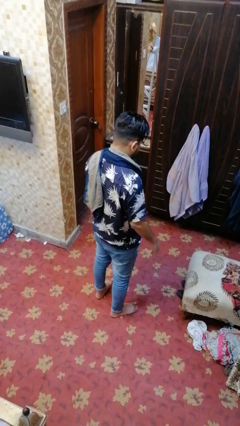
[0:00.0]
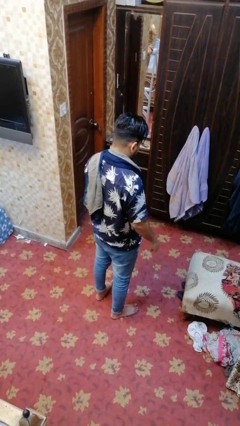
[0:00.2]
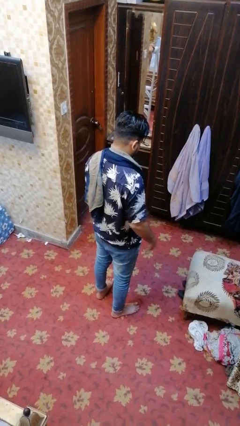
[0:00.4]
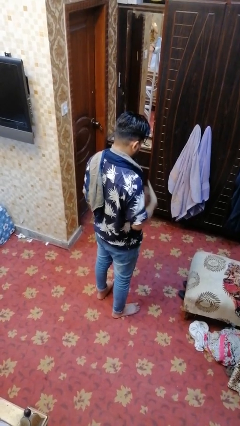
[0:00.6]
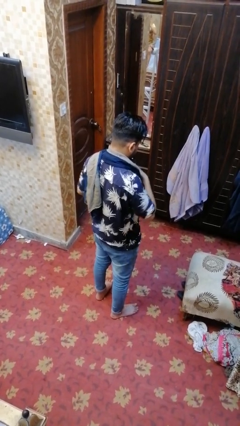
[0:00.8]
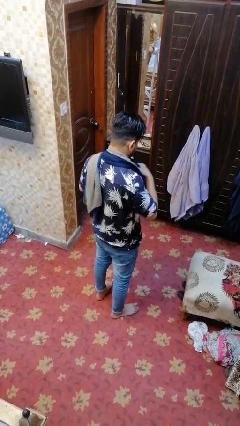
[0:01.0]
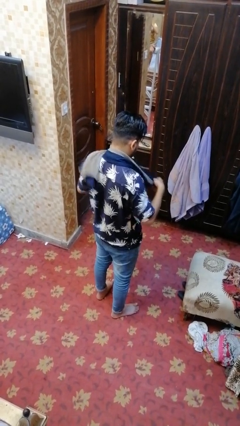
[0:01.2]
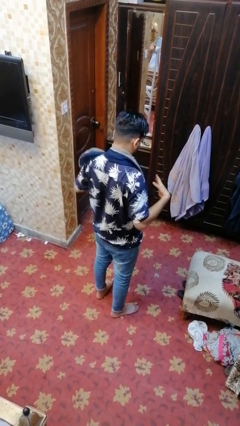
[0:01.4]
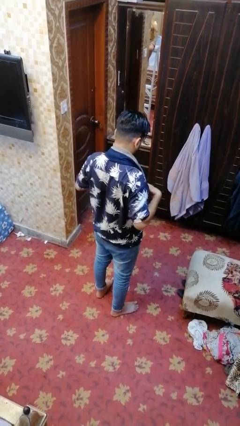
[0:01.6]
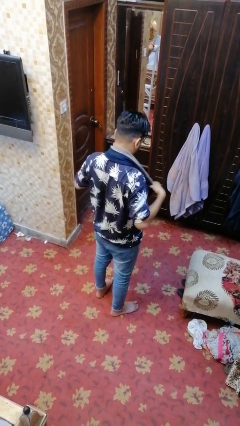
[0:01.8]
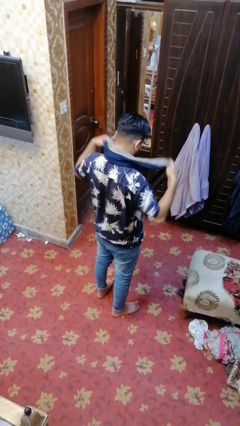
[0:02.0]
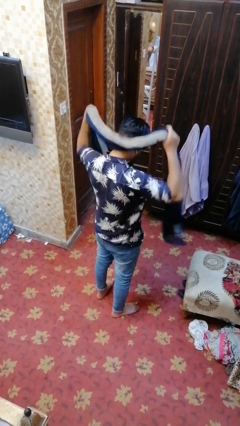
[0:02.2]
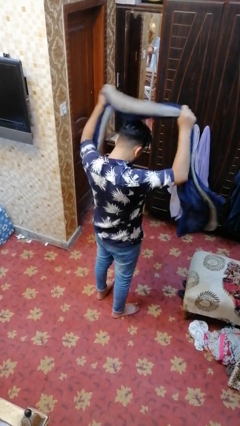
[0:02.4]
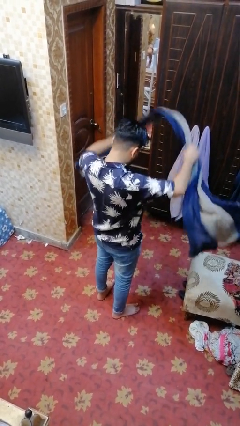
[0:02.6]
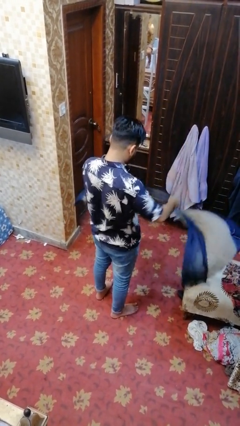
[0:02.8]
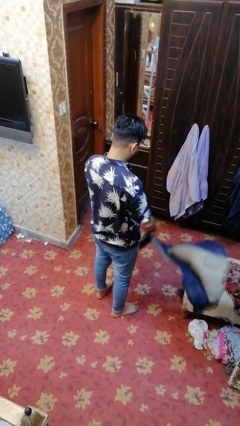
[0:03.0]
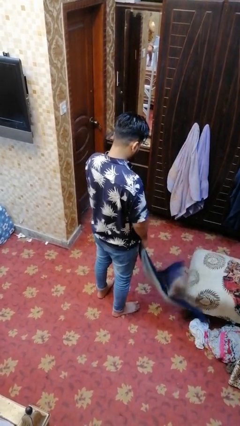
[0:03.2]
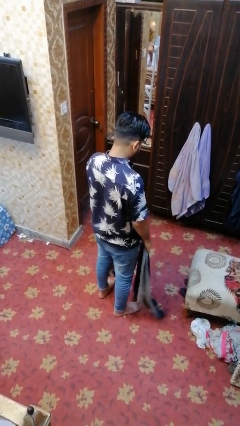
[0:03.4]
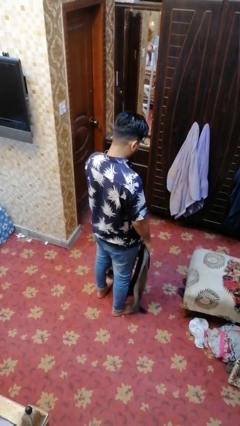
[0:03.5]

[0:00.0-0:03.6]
person takes off scarf

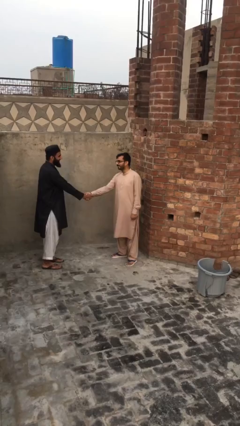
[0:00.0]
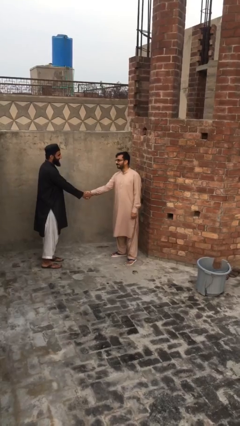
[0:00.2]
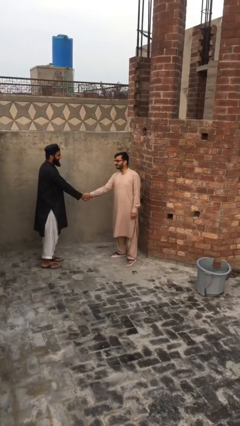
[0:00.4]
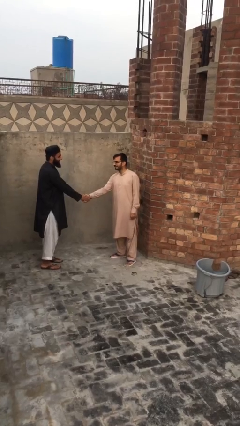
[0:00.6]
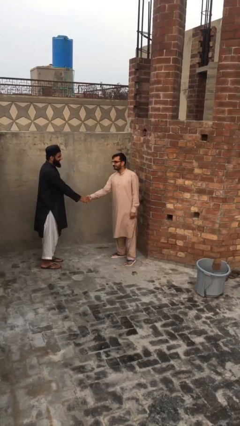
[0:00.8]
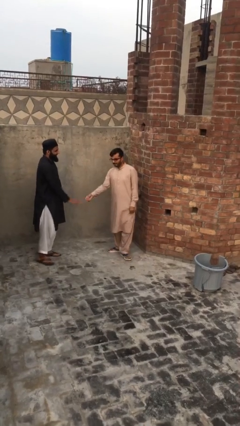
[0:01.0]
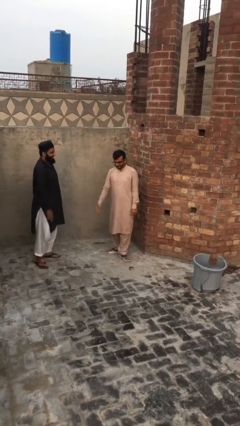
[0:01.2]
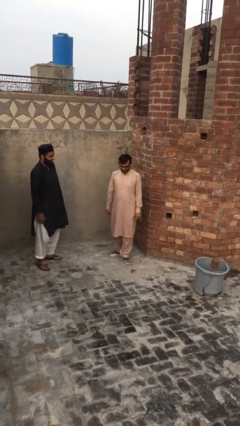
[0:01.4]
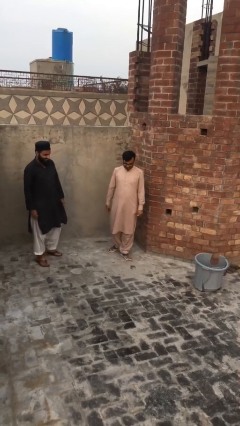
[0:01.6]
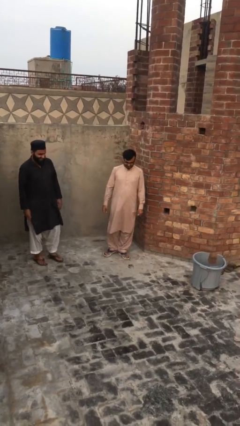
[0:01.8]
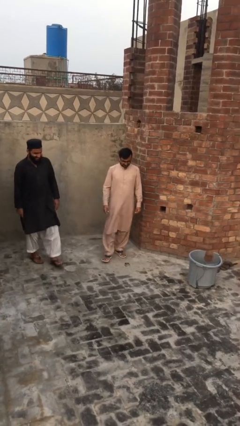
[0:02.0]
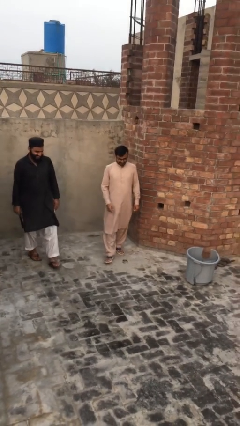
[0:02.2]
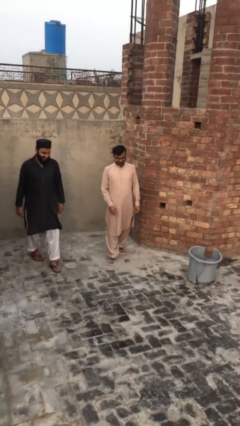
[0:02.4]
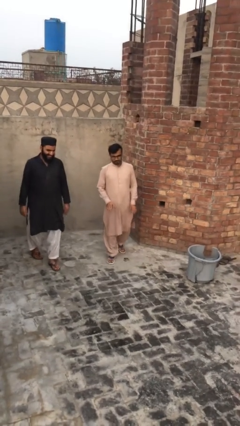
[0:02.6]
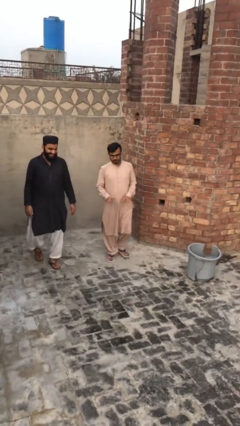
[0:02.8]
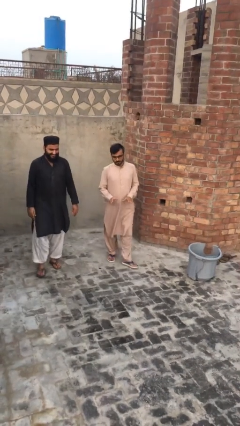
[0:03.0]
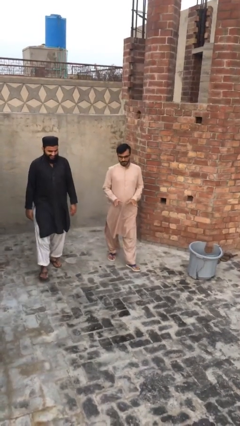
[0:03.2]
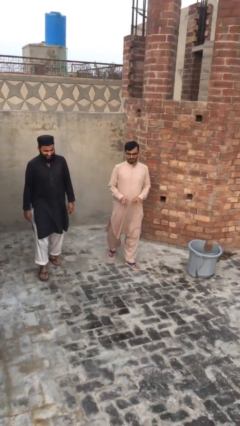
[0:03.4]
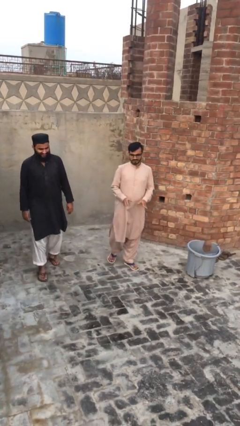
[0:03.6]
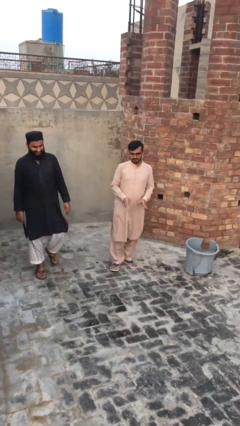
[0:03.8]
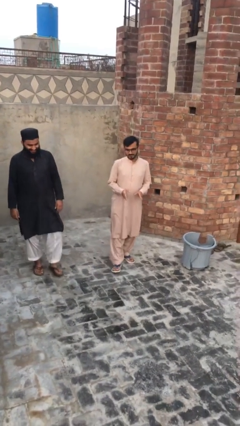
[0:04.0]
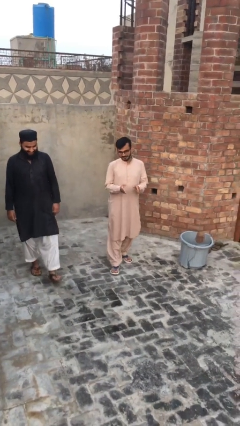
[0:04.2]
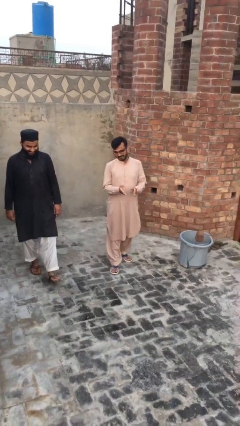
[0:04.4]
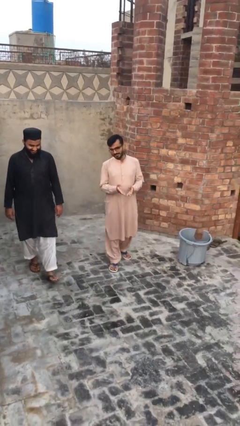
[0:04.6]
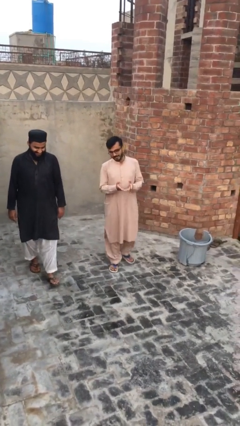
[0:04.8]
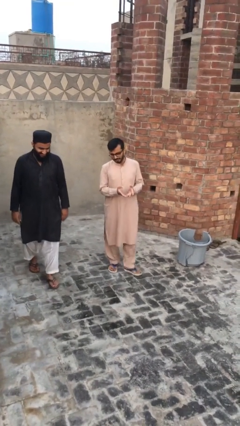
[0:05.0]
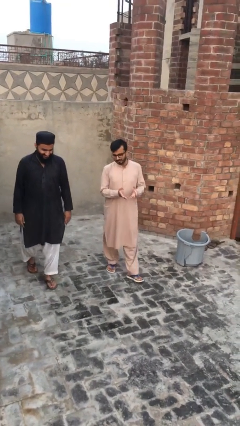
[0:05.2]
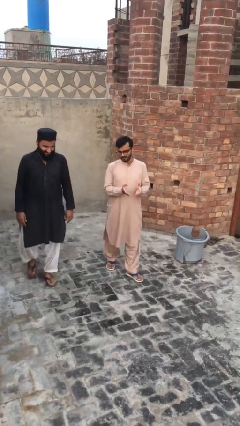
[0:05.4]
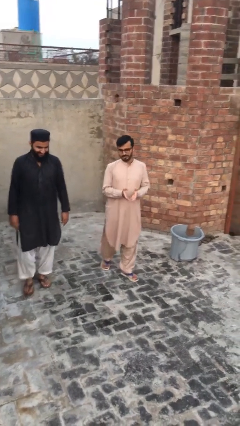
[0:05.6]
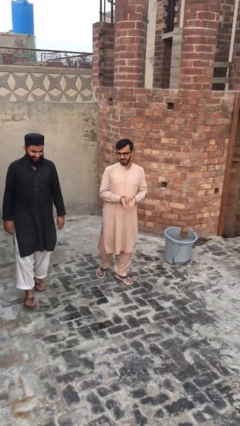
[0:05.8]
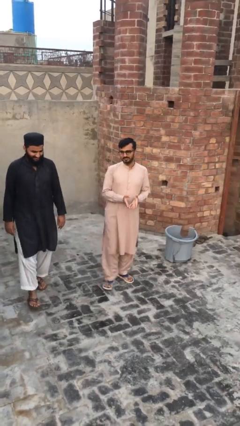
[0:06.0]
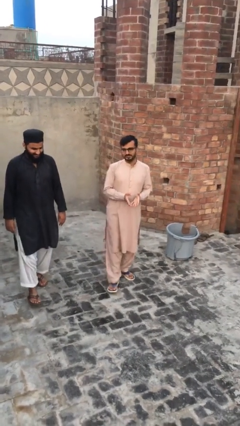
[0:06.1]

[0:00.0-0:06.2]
person talks to person

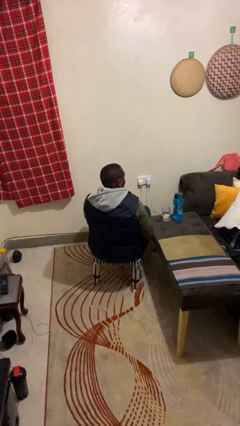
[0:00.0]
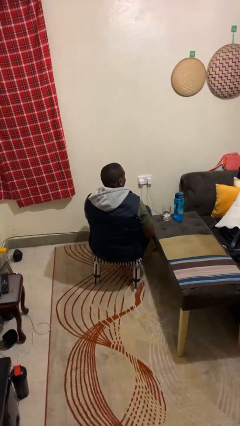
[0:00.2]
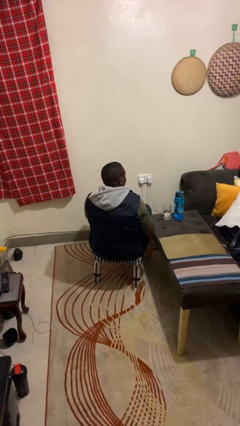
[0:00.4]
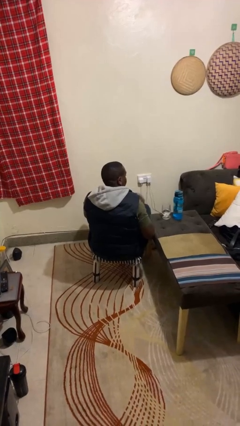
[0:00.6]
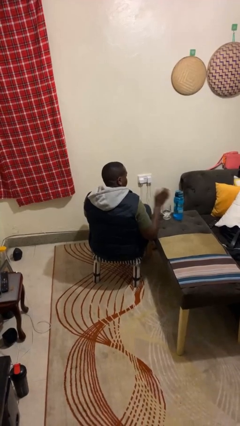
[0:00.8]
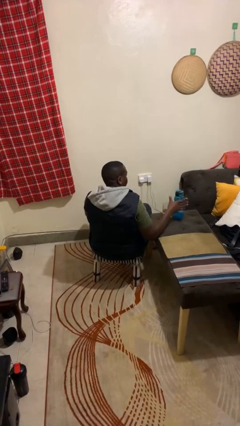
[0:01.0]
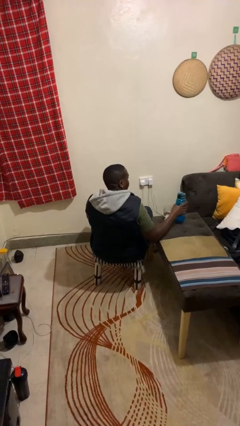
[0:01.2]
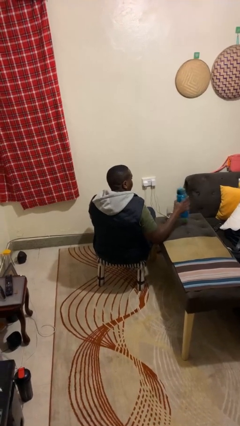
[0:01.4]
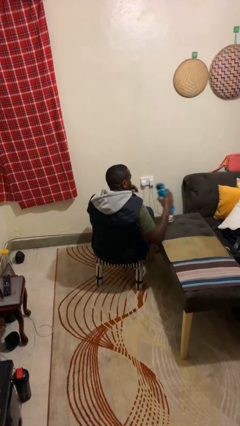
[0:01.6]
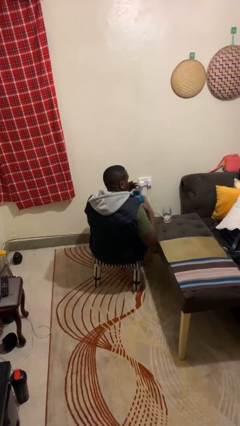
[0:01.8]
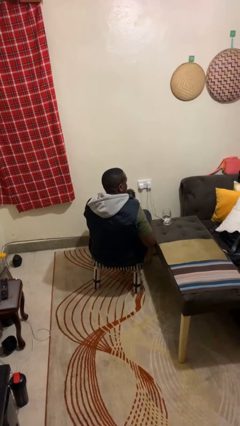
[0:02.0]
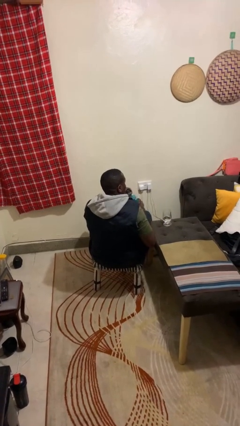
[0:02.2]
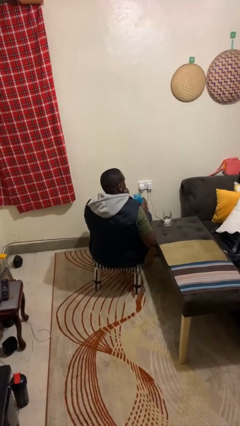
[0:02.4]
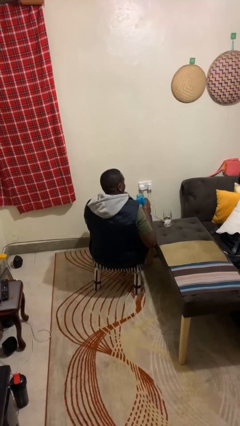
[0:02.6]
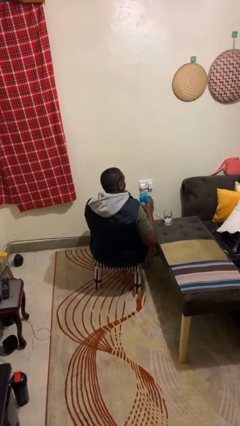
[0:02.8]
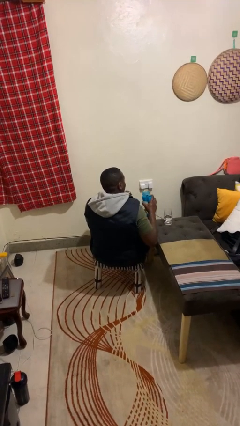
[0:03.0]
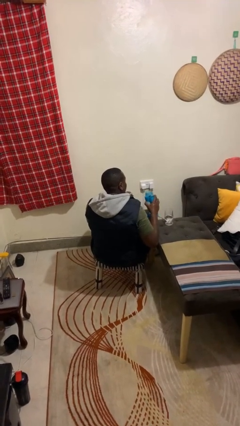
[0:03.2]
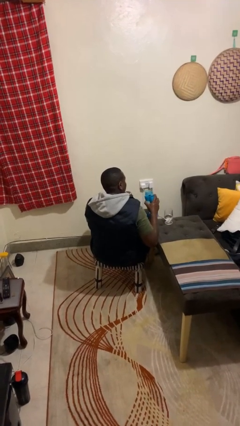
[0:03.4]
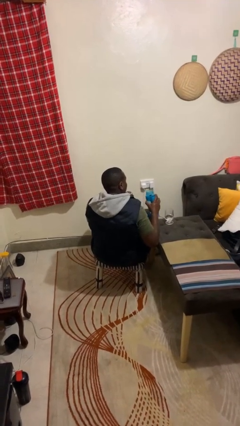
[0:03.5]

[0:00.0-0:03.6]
person unscrews lid from bottle

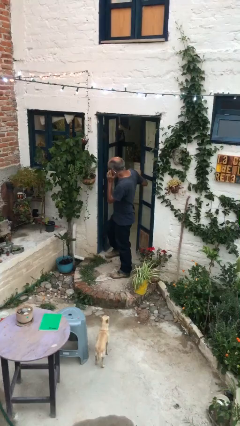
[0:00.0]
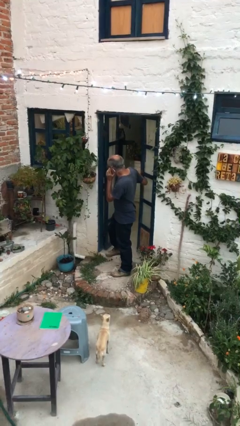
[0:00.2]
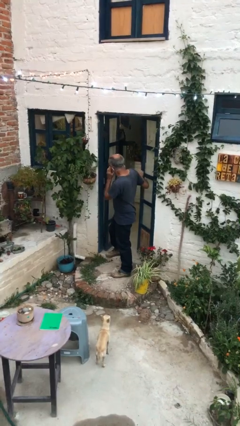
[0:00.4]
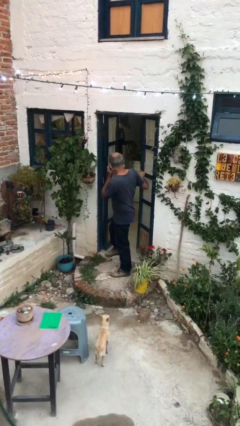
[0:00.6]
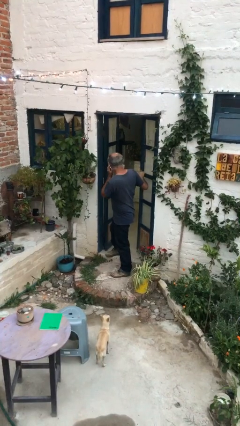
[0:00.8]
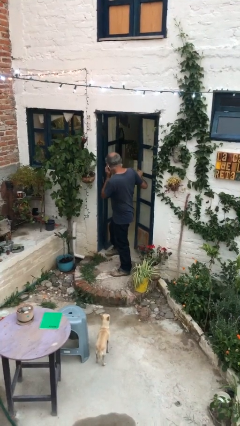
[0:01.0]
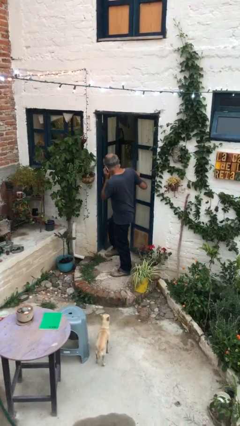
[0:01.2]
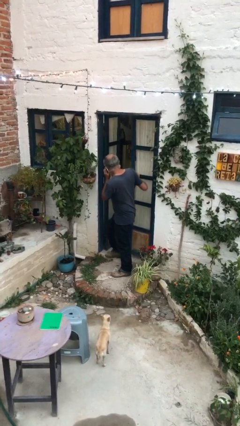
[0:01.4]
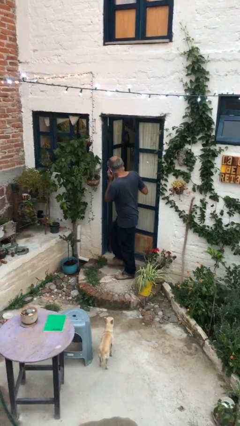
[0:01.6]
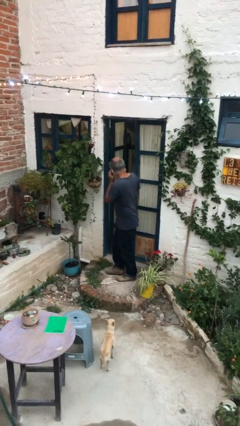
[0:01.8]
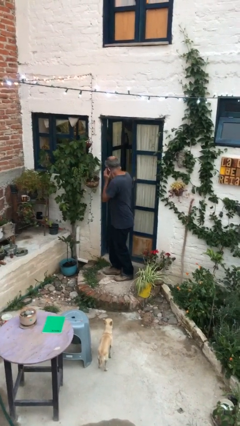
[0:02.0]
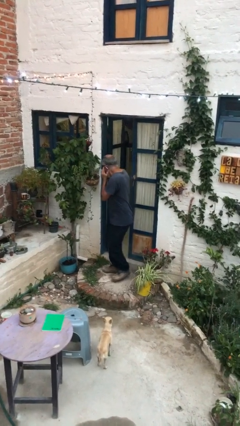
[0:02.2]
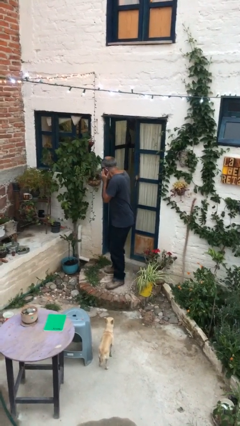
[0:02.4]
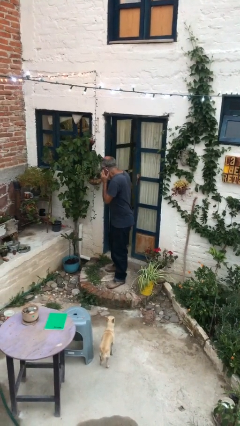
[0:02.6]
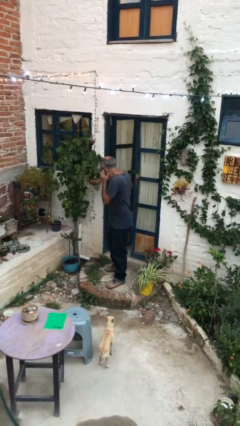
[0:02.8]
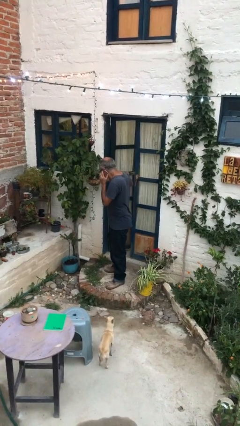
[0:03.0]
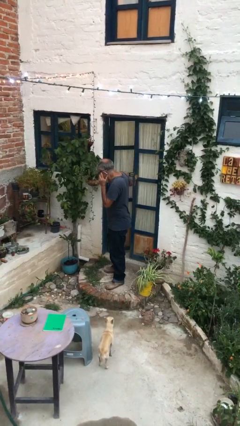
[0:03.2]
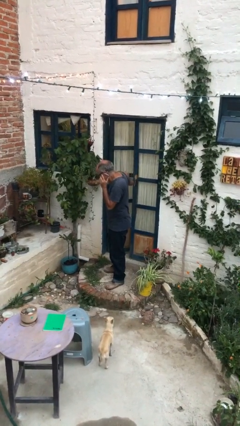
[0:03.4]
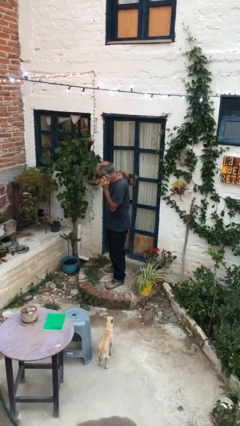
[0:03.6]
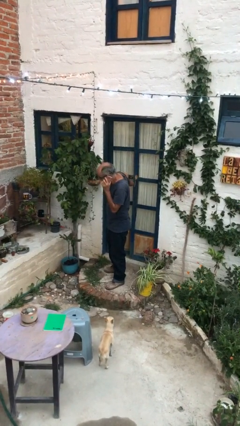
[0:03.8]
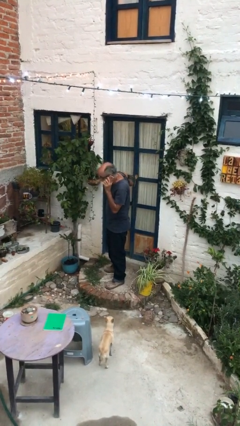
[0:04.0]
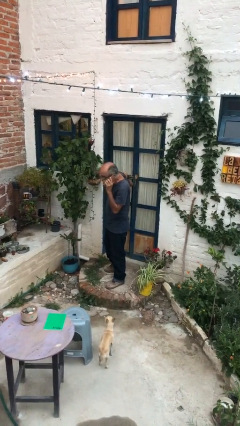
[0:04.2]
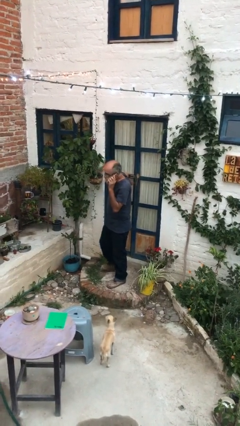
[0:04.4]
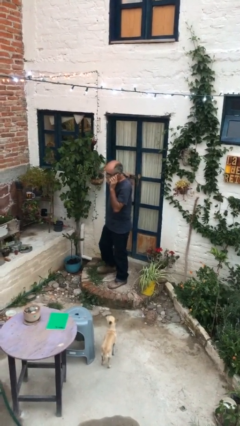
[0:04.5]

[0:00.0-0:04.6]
person closes facility door
